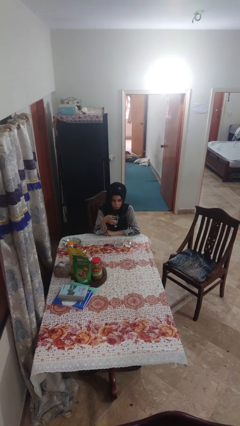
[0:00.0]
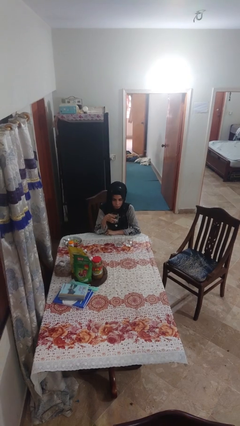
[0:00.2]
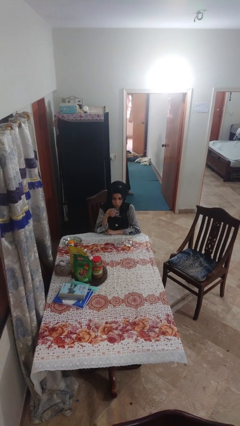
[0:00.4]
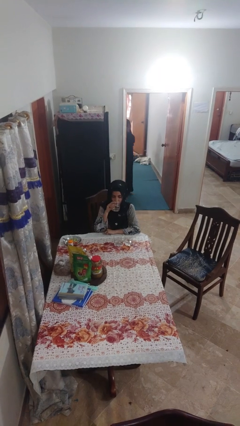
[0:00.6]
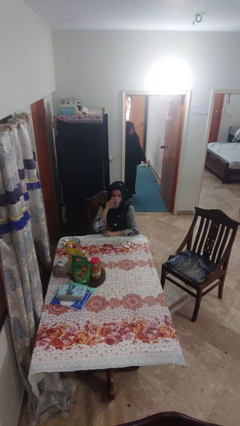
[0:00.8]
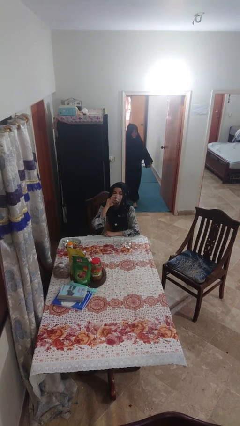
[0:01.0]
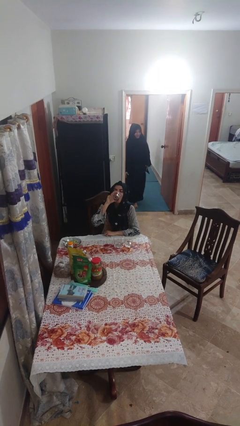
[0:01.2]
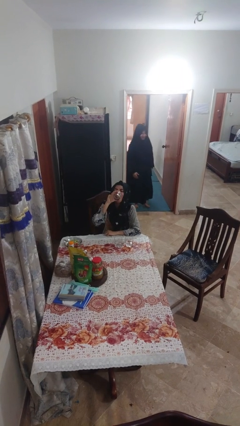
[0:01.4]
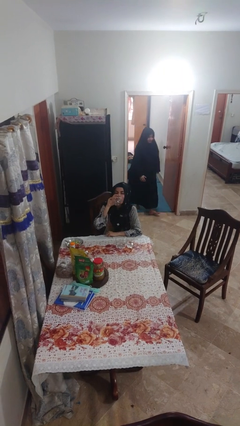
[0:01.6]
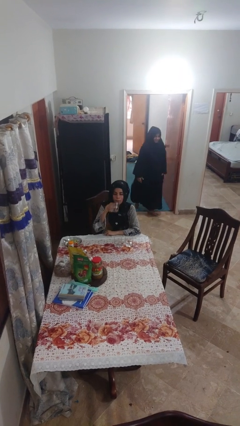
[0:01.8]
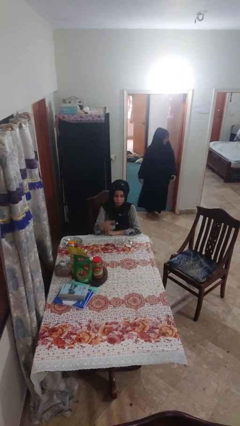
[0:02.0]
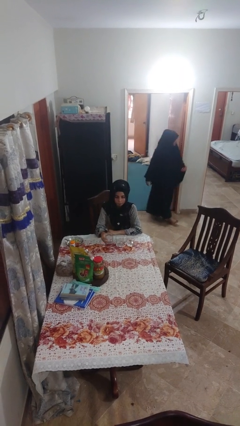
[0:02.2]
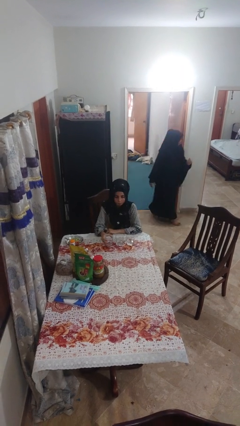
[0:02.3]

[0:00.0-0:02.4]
person drinks from shotglass

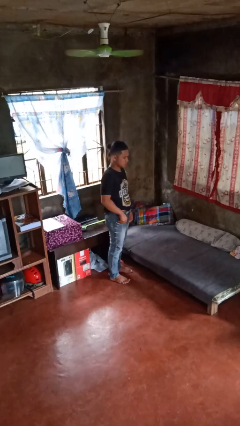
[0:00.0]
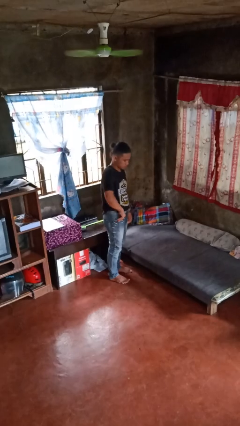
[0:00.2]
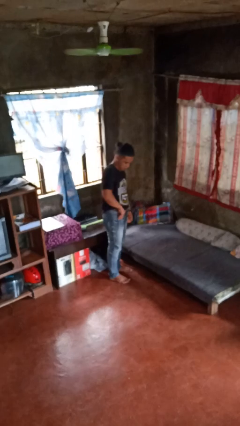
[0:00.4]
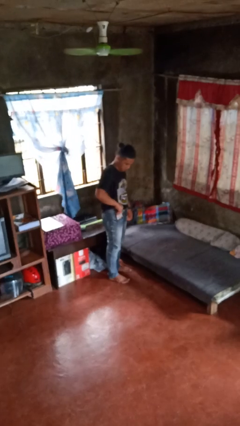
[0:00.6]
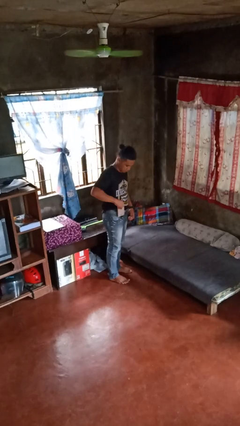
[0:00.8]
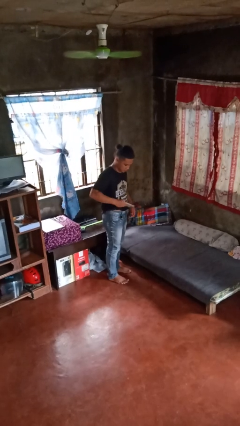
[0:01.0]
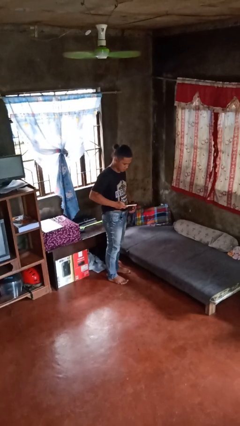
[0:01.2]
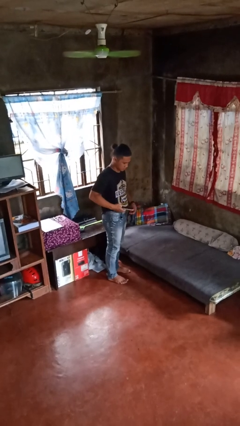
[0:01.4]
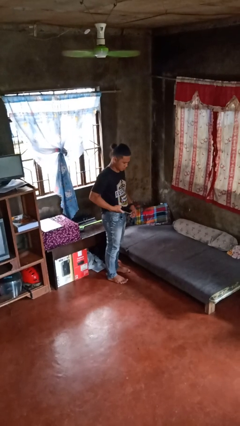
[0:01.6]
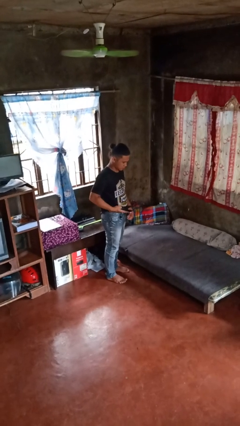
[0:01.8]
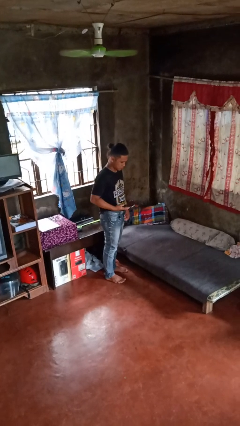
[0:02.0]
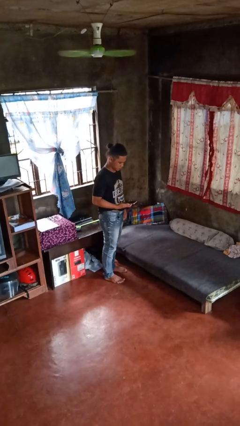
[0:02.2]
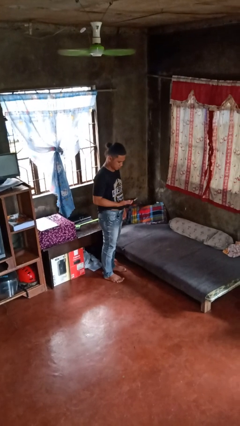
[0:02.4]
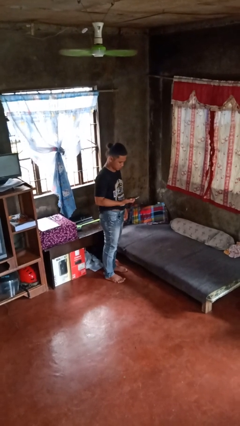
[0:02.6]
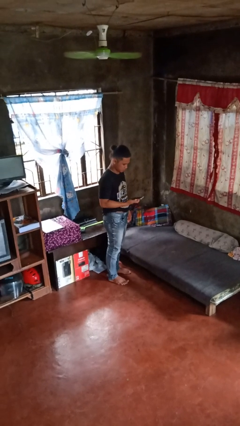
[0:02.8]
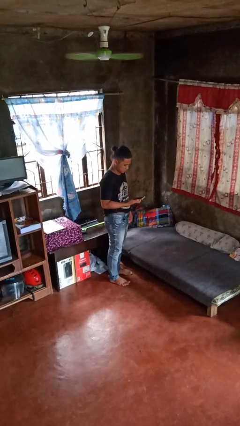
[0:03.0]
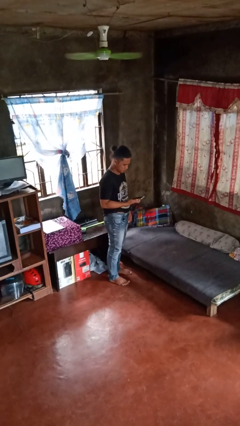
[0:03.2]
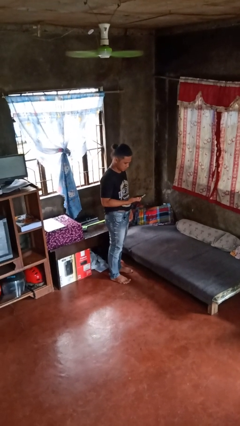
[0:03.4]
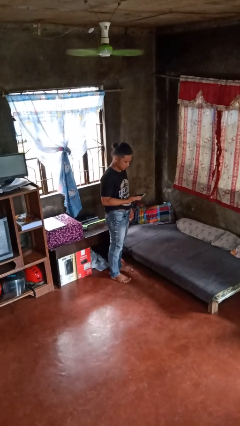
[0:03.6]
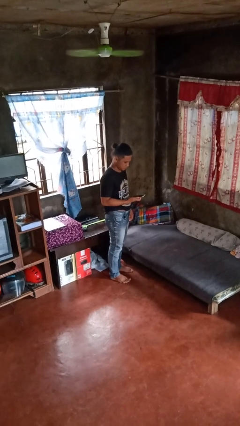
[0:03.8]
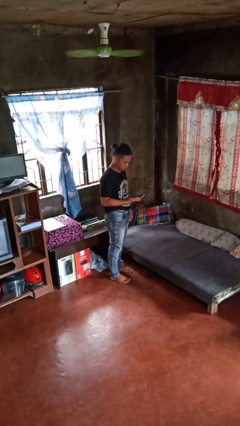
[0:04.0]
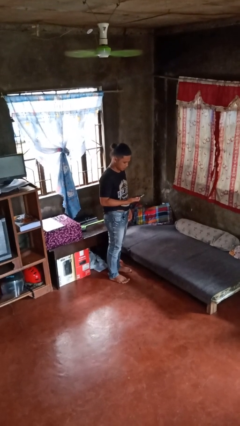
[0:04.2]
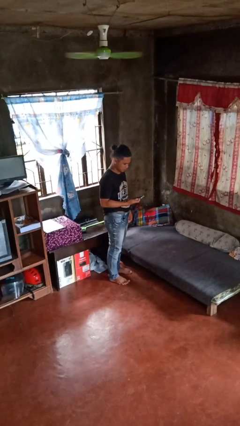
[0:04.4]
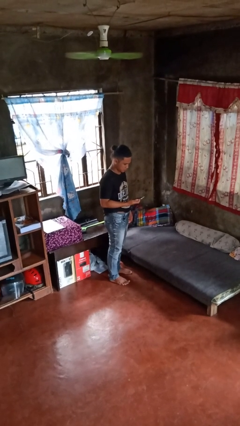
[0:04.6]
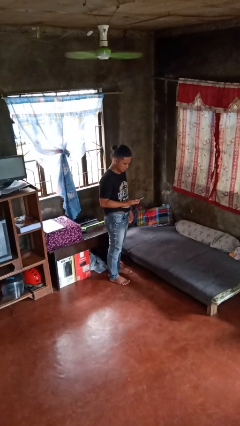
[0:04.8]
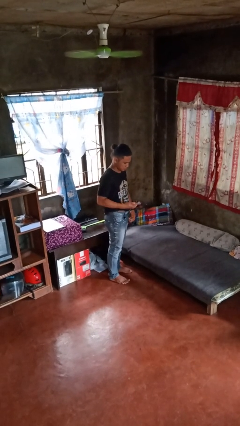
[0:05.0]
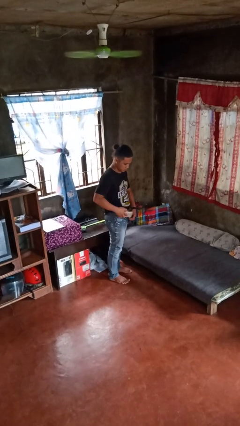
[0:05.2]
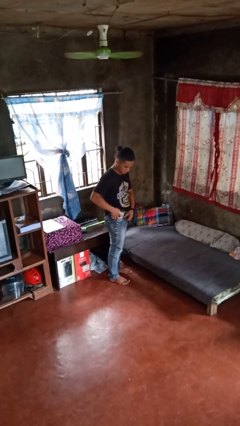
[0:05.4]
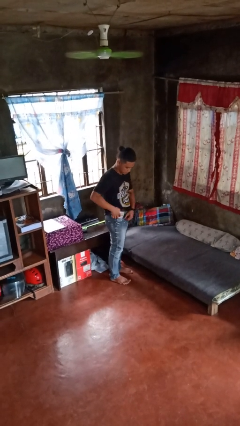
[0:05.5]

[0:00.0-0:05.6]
person takes phone from pocket

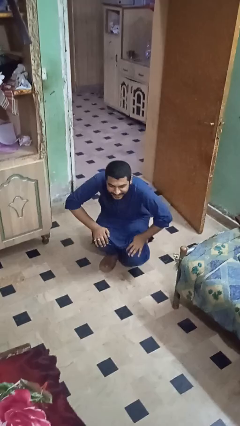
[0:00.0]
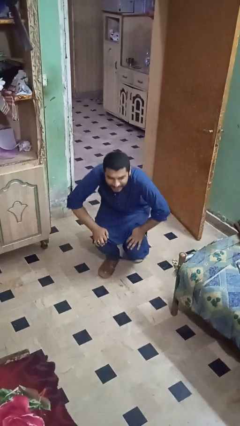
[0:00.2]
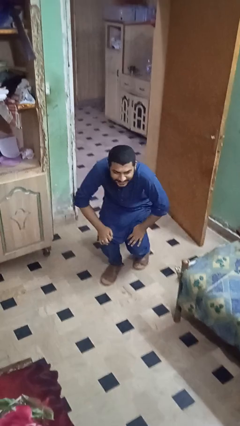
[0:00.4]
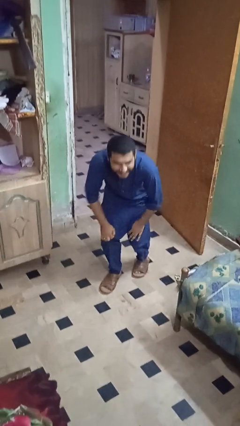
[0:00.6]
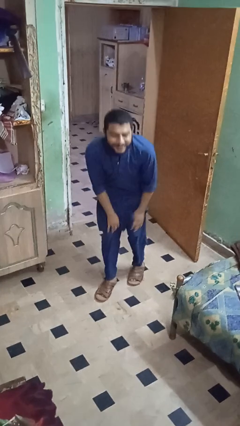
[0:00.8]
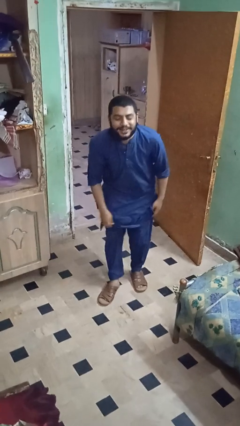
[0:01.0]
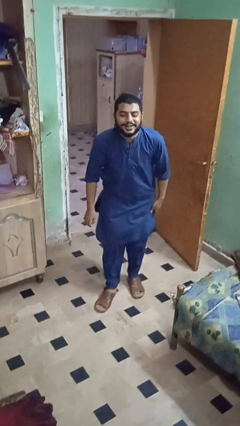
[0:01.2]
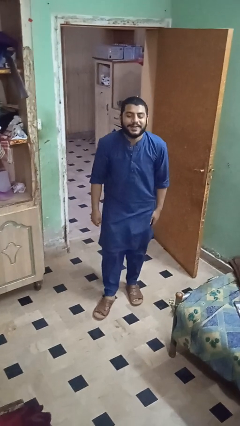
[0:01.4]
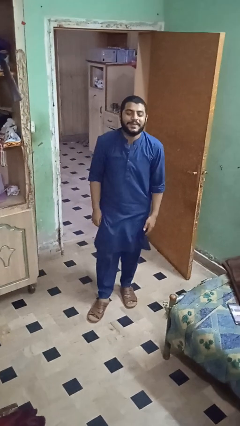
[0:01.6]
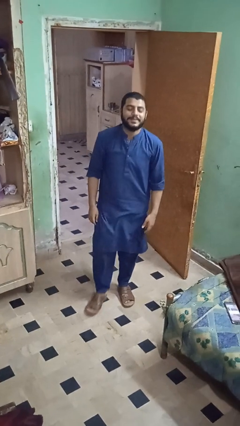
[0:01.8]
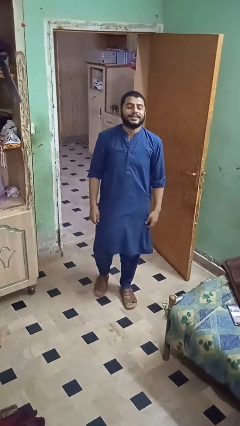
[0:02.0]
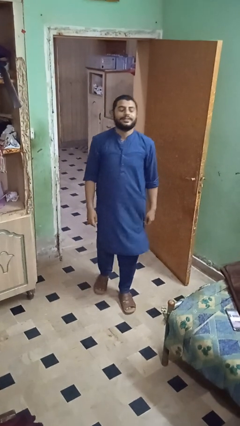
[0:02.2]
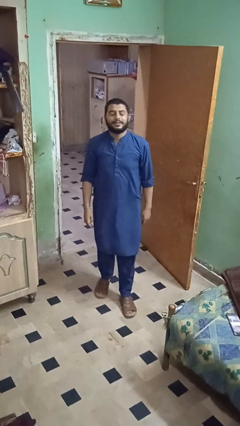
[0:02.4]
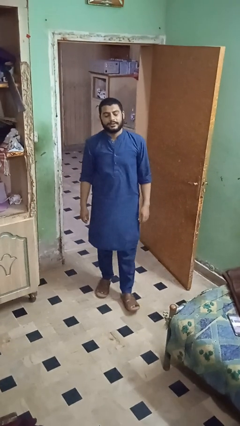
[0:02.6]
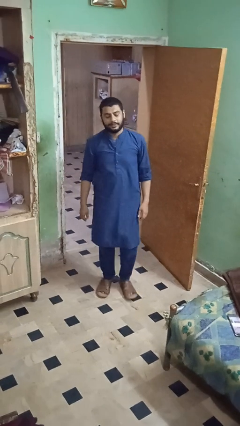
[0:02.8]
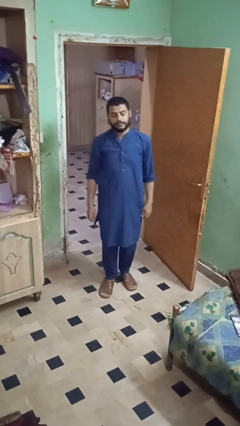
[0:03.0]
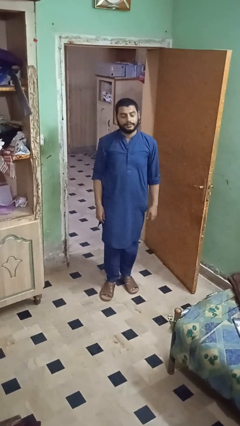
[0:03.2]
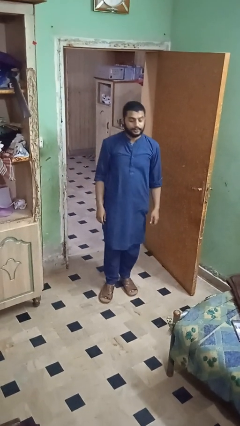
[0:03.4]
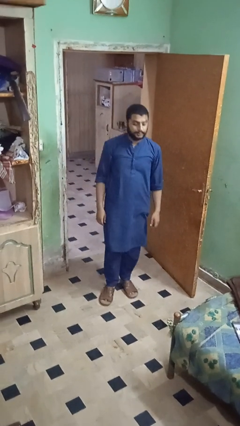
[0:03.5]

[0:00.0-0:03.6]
person stands up from floor

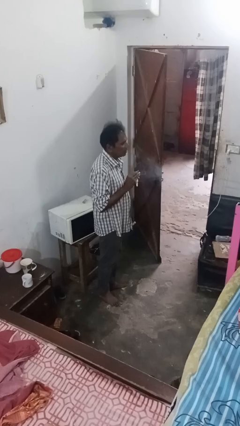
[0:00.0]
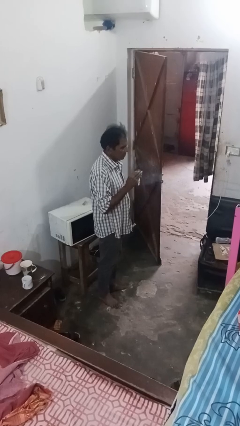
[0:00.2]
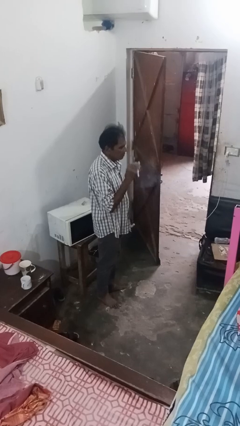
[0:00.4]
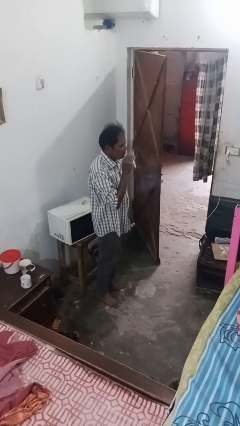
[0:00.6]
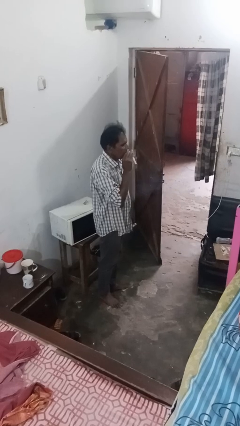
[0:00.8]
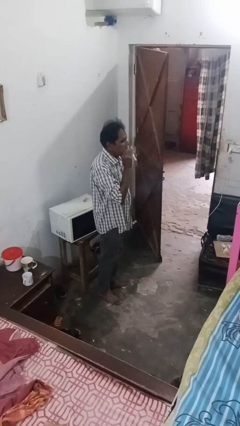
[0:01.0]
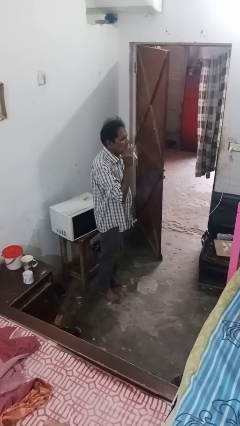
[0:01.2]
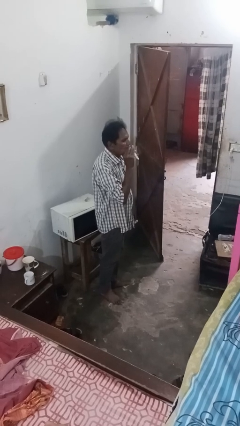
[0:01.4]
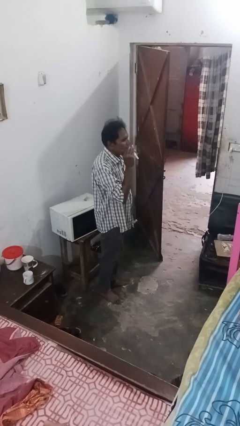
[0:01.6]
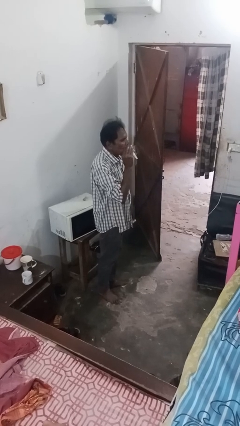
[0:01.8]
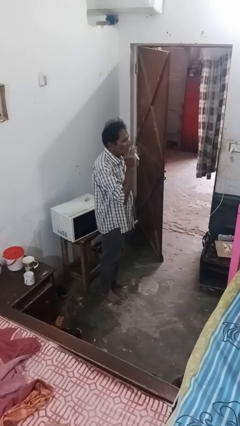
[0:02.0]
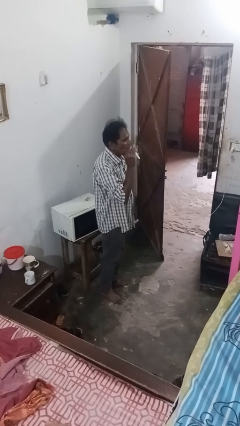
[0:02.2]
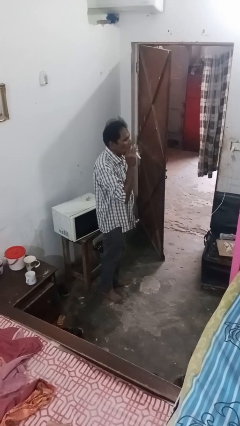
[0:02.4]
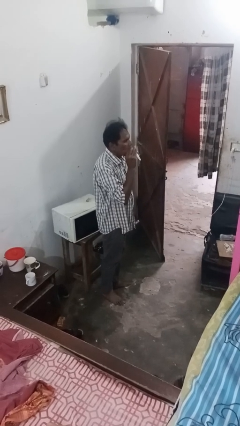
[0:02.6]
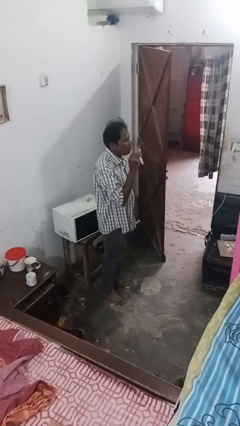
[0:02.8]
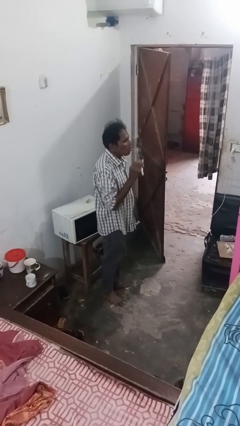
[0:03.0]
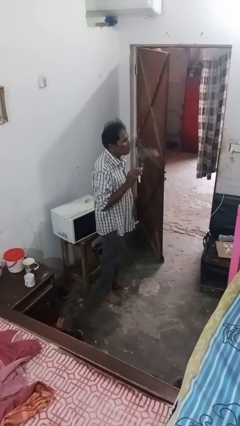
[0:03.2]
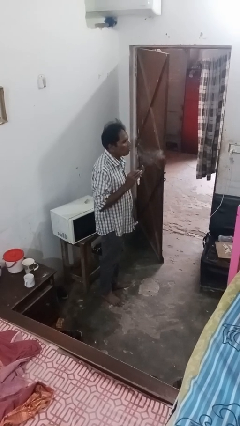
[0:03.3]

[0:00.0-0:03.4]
person vapes

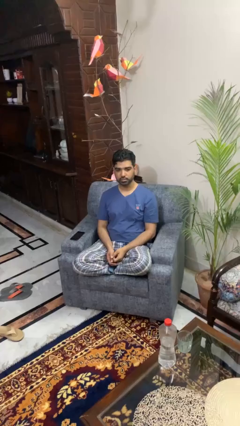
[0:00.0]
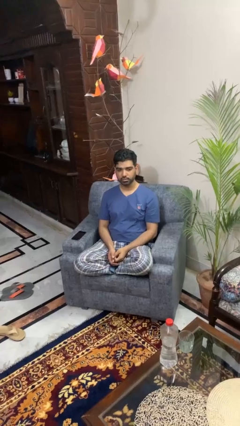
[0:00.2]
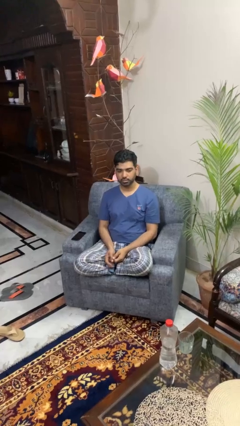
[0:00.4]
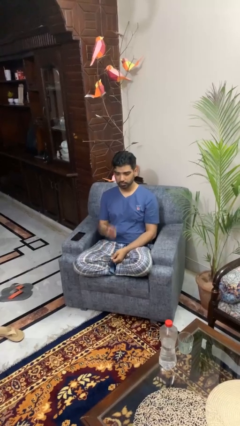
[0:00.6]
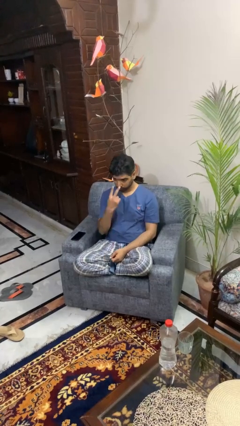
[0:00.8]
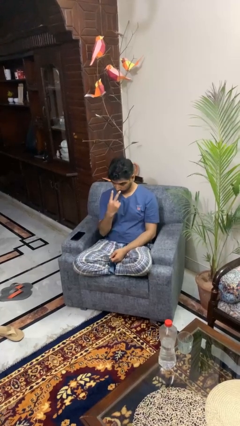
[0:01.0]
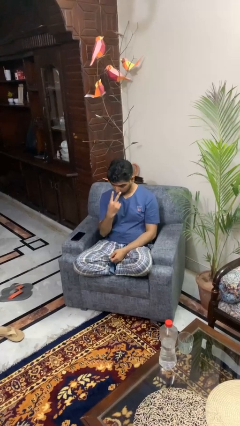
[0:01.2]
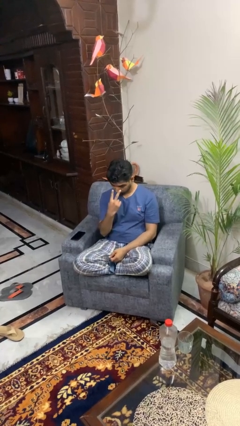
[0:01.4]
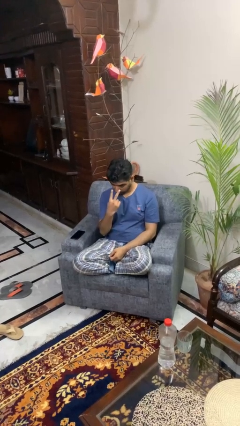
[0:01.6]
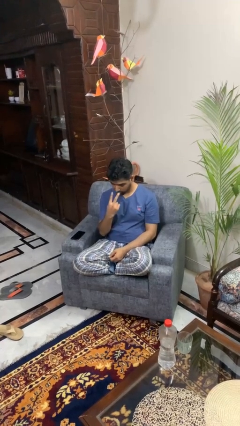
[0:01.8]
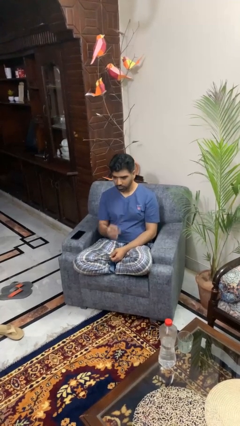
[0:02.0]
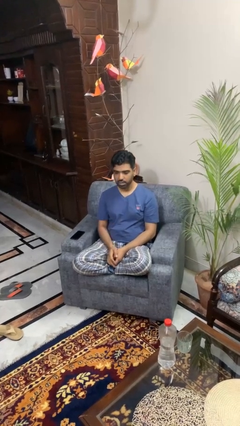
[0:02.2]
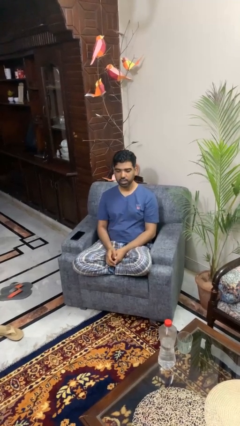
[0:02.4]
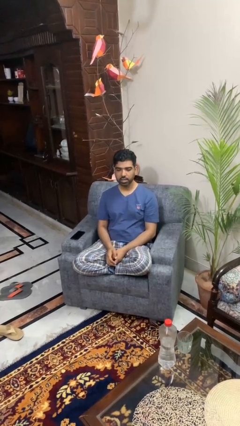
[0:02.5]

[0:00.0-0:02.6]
person gestures watch closely
